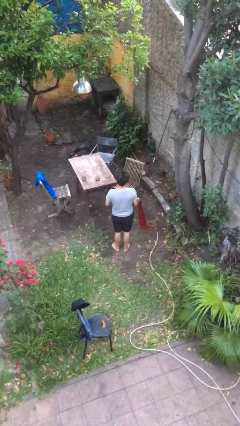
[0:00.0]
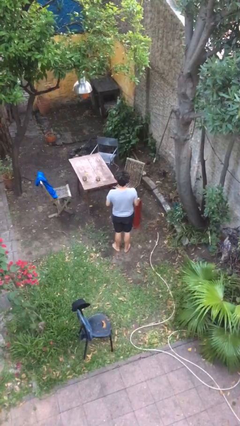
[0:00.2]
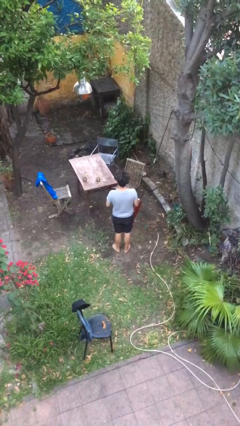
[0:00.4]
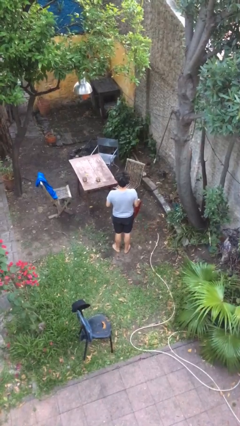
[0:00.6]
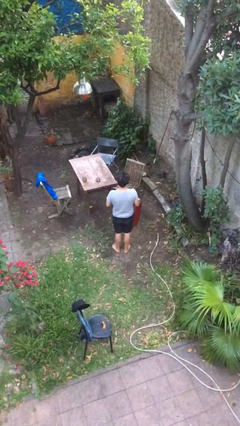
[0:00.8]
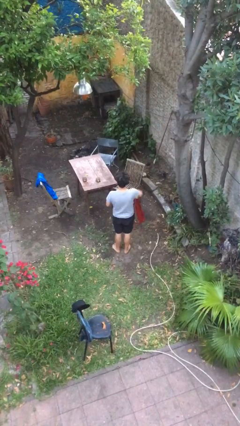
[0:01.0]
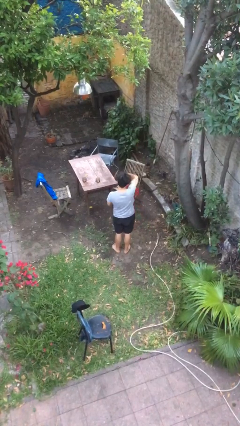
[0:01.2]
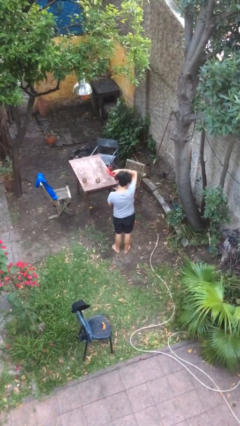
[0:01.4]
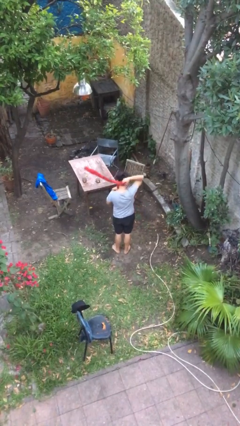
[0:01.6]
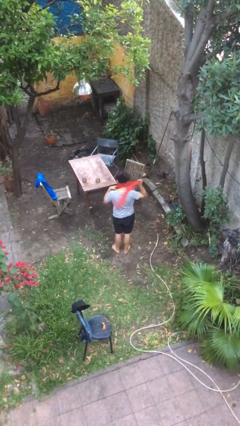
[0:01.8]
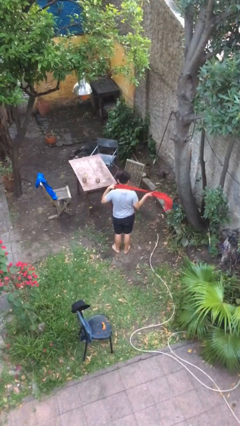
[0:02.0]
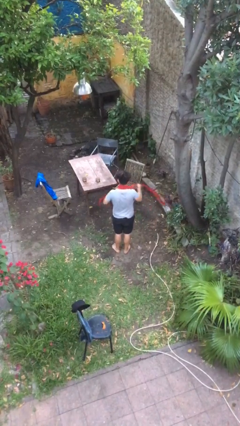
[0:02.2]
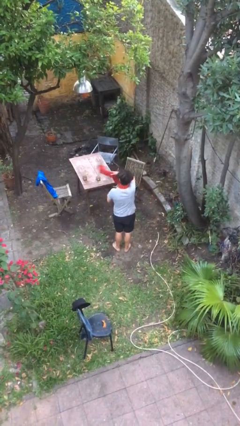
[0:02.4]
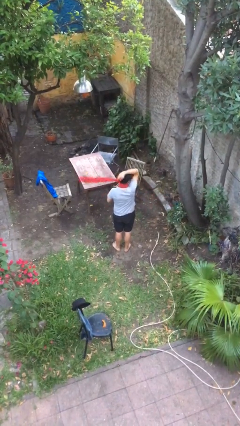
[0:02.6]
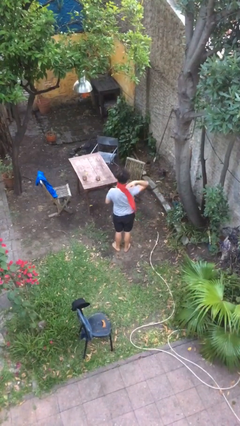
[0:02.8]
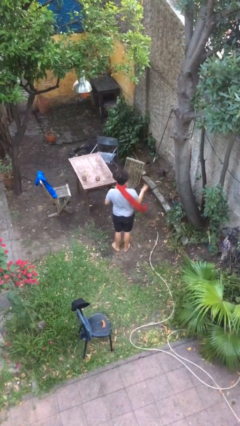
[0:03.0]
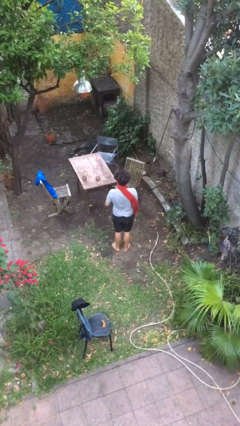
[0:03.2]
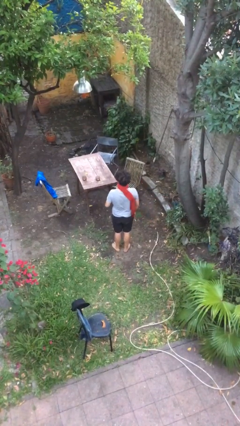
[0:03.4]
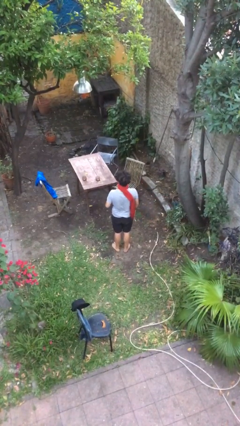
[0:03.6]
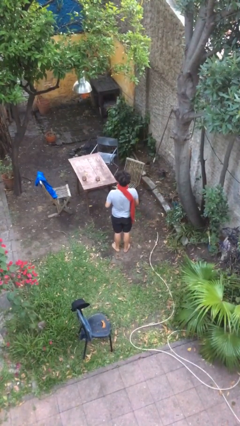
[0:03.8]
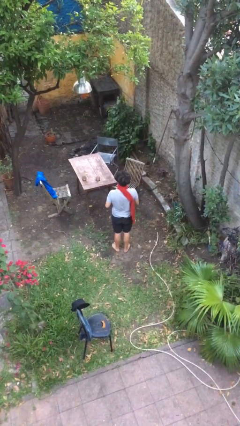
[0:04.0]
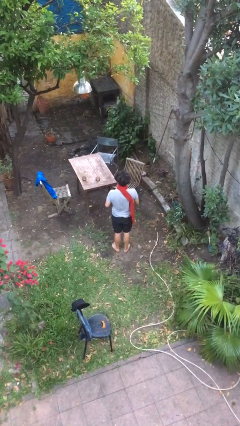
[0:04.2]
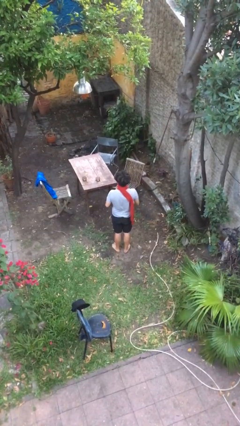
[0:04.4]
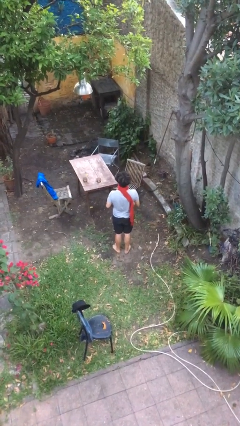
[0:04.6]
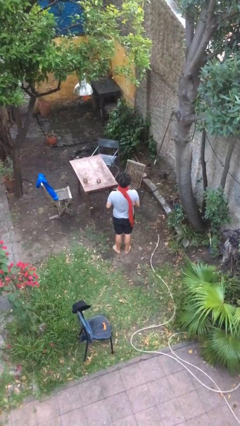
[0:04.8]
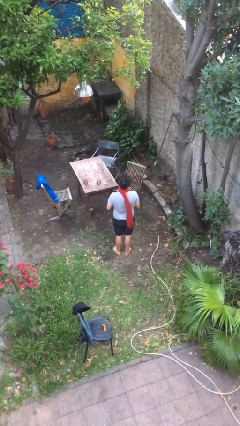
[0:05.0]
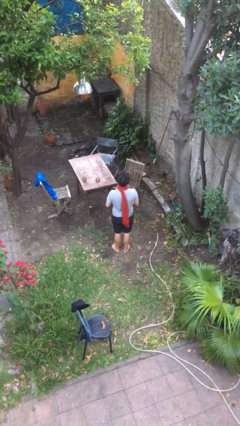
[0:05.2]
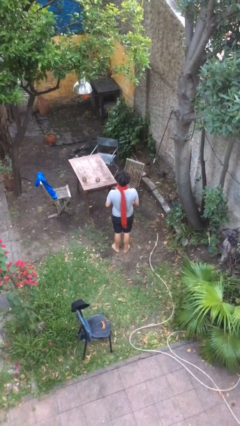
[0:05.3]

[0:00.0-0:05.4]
person puts on scarf

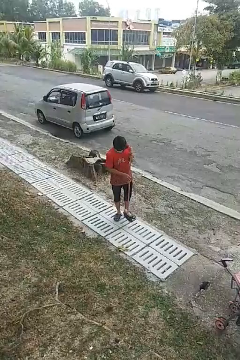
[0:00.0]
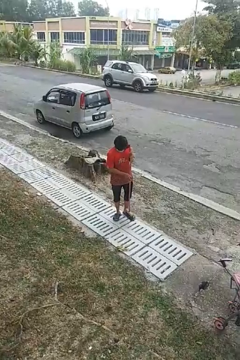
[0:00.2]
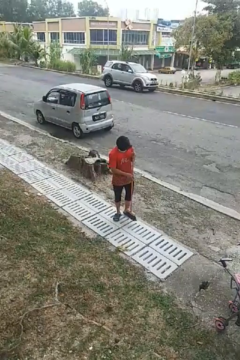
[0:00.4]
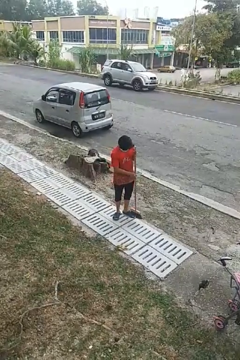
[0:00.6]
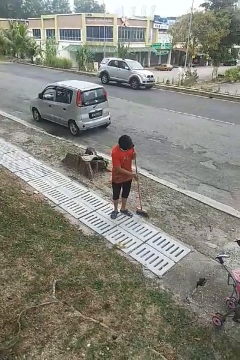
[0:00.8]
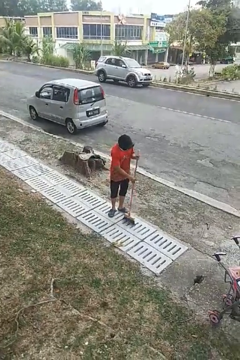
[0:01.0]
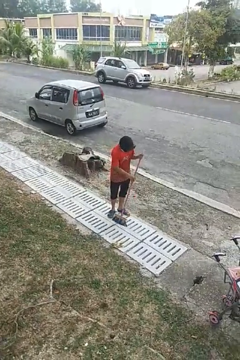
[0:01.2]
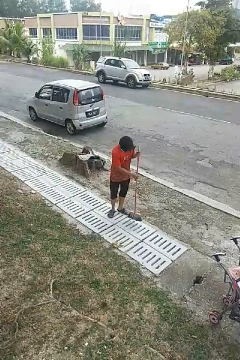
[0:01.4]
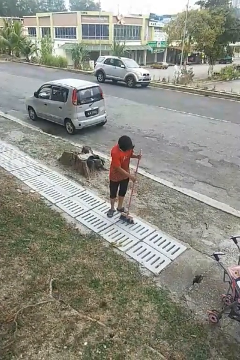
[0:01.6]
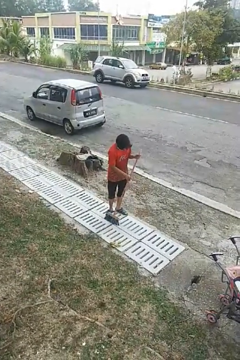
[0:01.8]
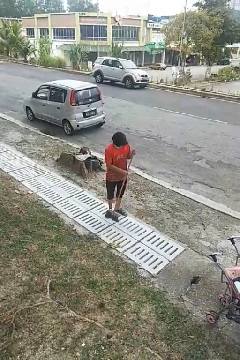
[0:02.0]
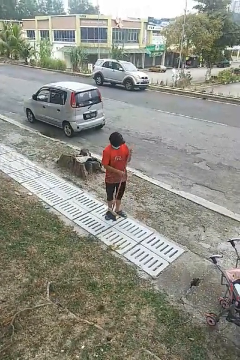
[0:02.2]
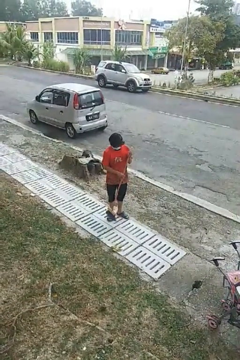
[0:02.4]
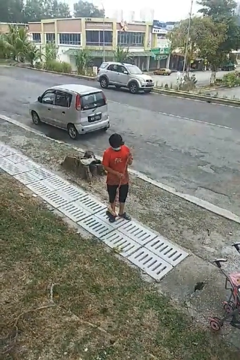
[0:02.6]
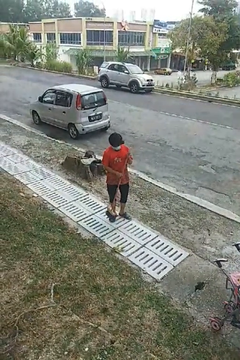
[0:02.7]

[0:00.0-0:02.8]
person sweeps floor

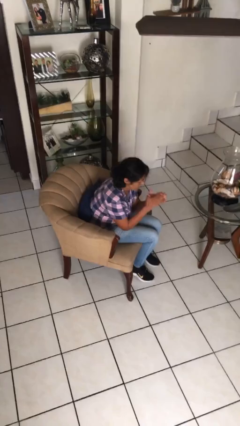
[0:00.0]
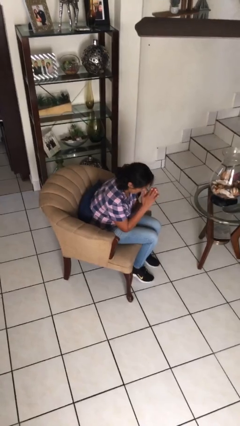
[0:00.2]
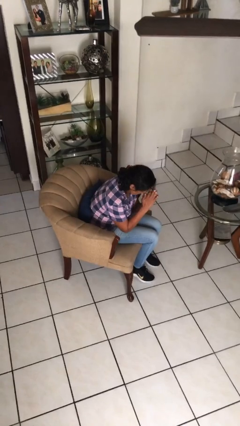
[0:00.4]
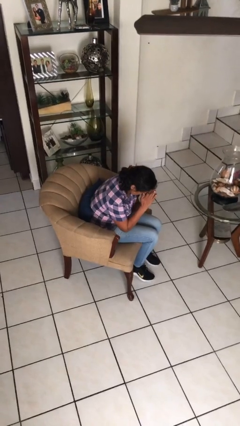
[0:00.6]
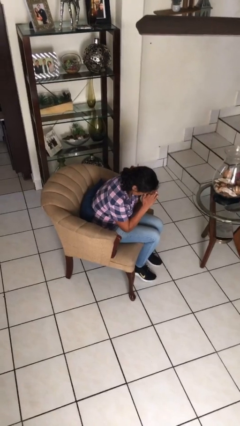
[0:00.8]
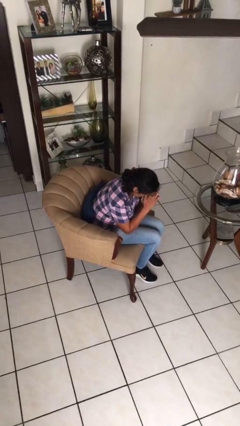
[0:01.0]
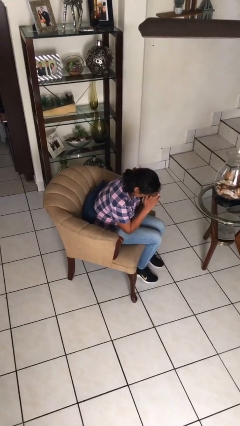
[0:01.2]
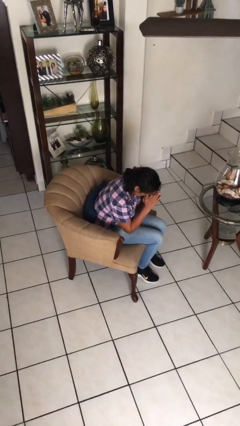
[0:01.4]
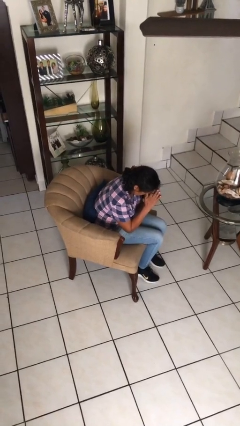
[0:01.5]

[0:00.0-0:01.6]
person prays

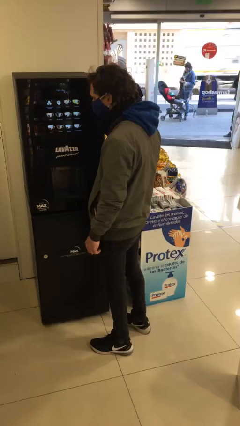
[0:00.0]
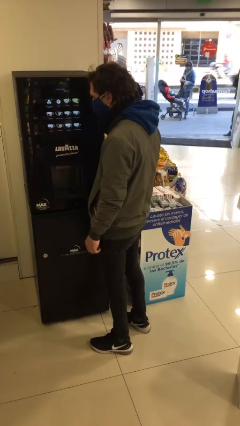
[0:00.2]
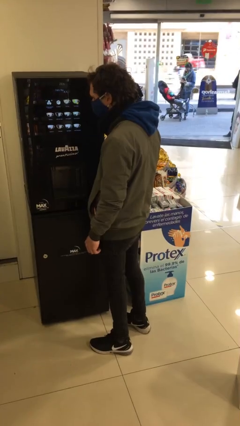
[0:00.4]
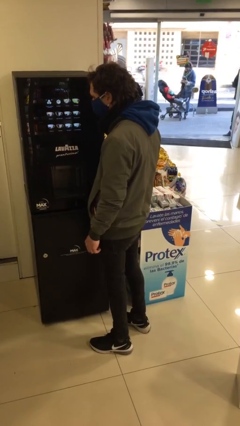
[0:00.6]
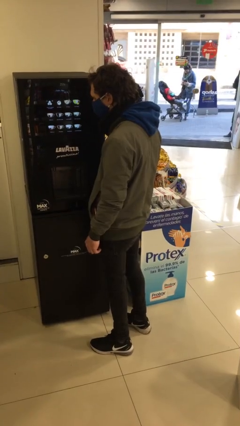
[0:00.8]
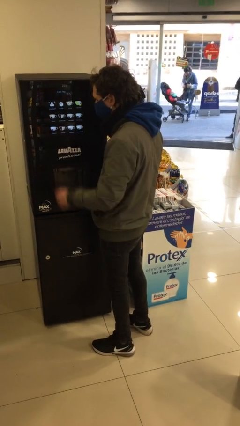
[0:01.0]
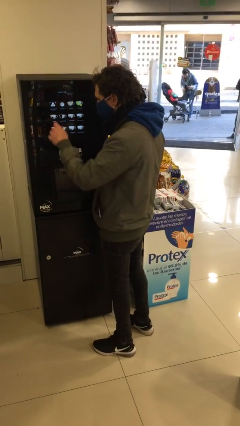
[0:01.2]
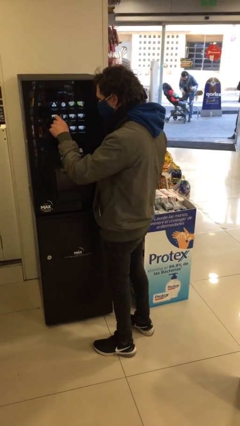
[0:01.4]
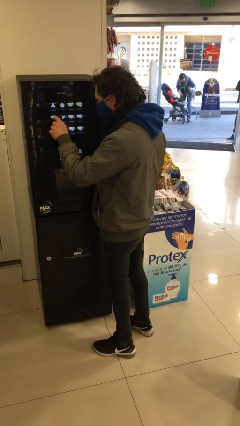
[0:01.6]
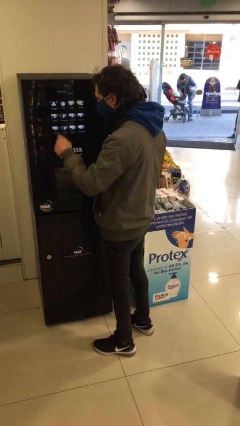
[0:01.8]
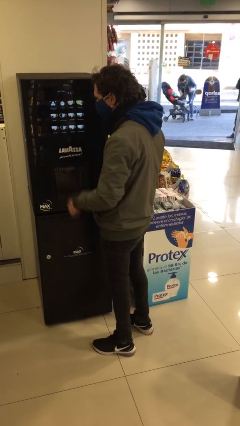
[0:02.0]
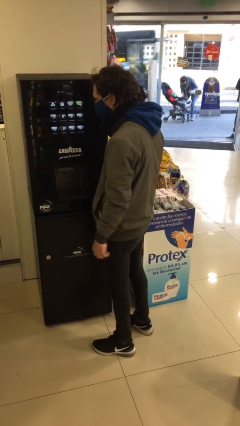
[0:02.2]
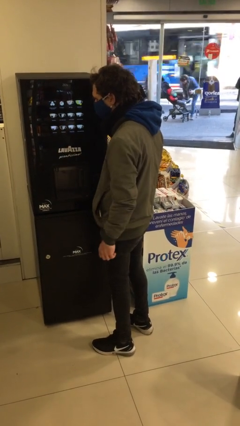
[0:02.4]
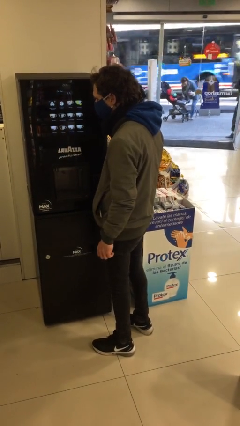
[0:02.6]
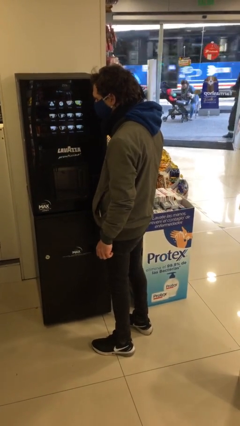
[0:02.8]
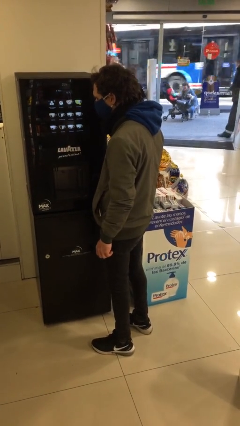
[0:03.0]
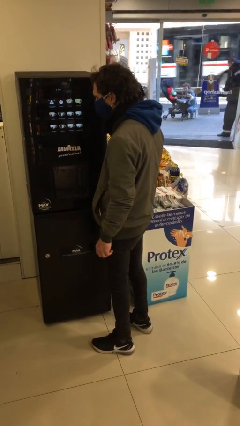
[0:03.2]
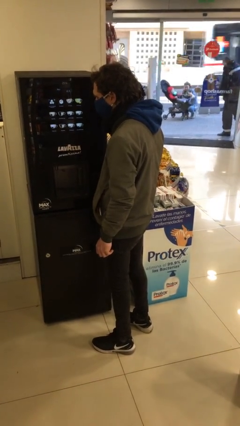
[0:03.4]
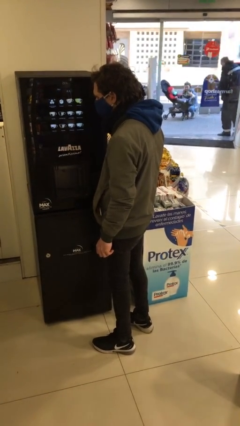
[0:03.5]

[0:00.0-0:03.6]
person purchases from machine

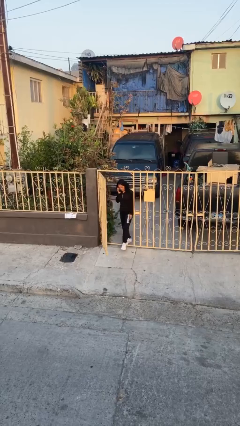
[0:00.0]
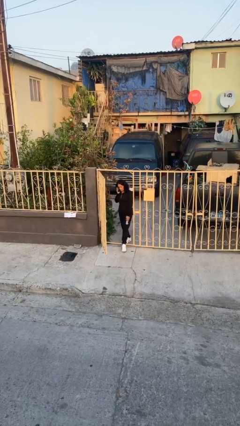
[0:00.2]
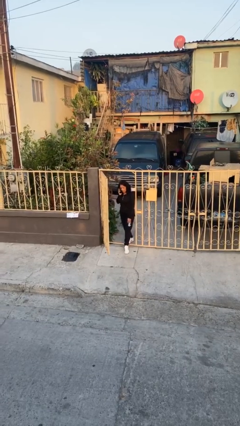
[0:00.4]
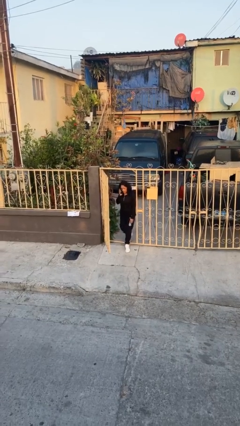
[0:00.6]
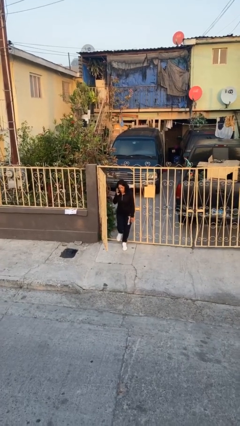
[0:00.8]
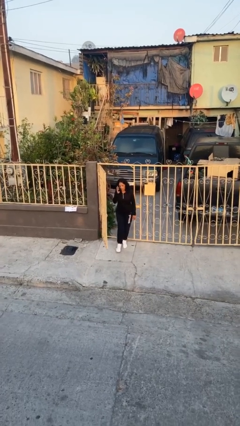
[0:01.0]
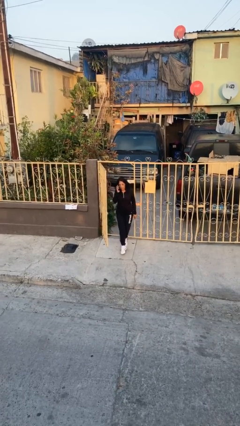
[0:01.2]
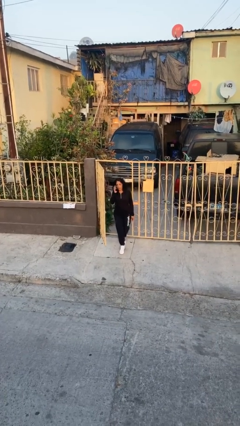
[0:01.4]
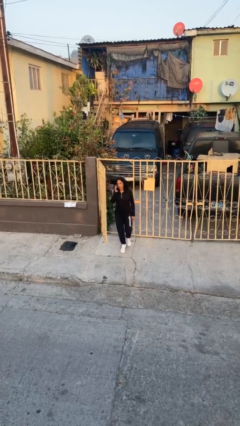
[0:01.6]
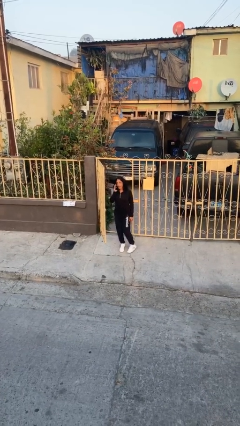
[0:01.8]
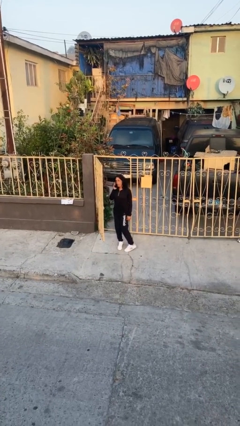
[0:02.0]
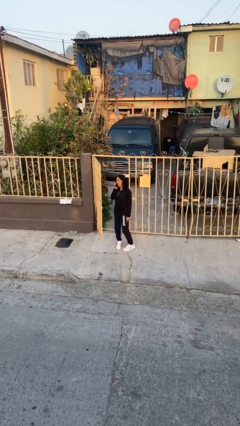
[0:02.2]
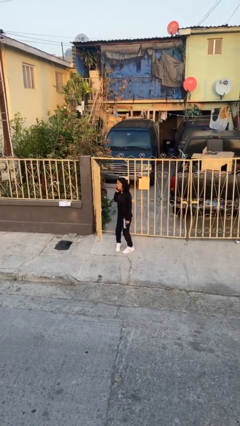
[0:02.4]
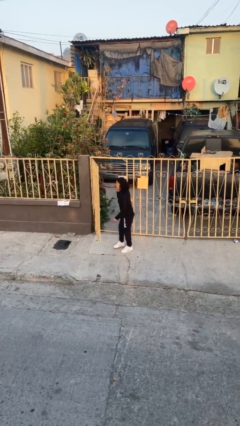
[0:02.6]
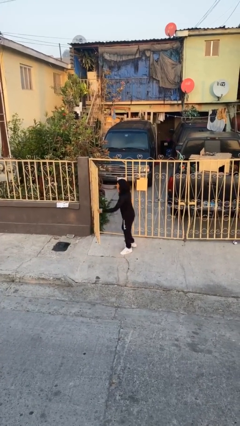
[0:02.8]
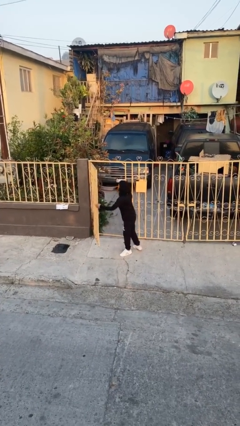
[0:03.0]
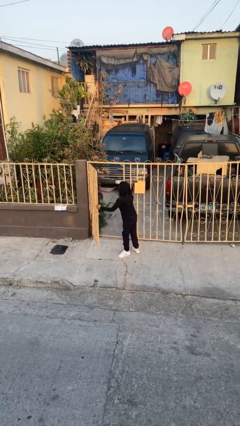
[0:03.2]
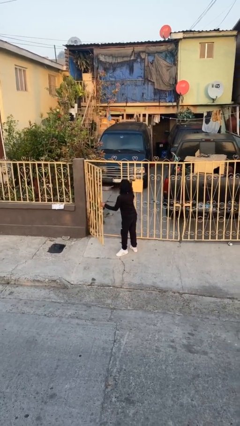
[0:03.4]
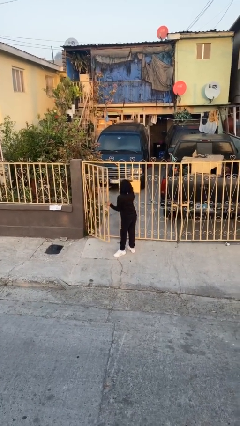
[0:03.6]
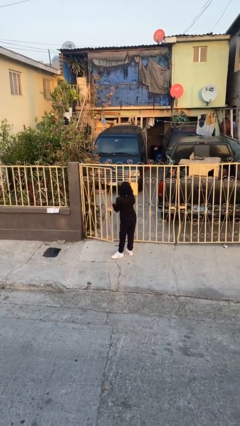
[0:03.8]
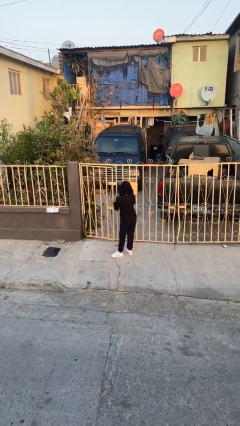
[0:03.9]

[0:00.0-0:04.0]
person enters scene through structure

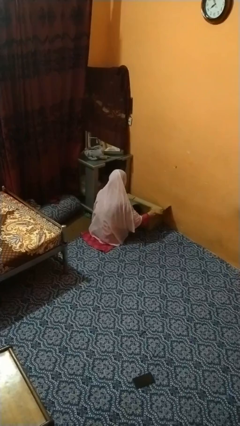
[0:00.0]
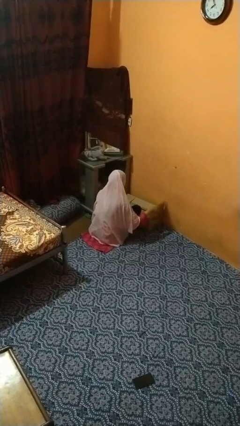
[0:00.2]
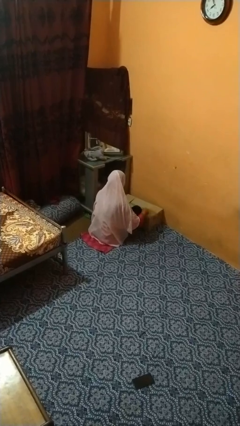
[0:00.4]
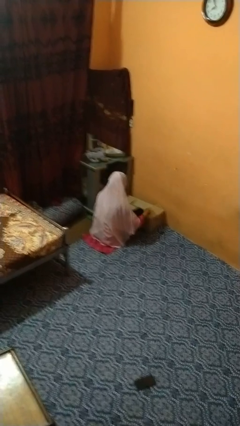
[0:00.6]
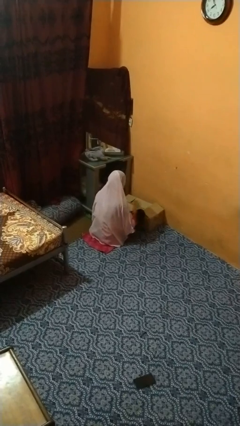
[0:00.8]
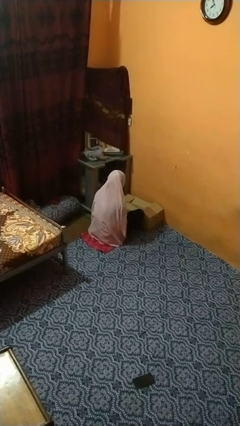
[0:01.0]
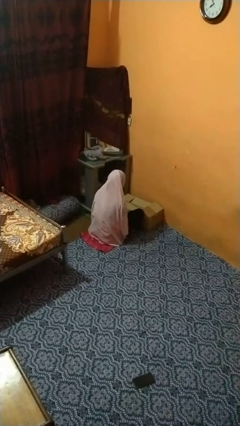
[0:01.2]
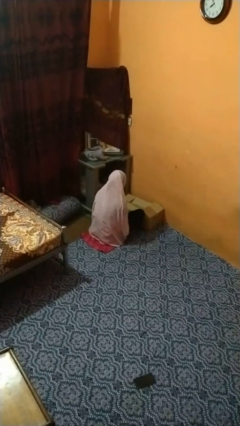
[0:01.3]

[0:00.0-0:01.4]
person closes box
